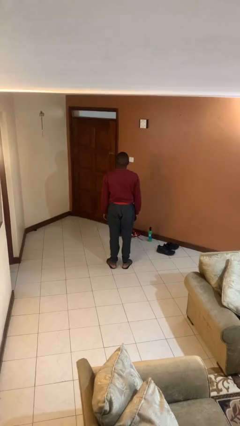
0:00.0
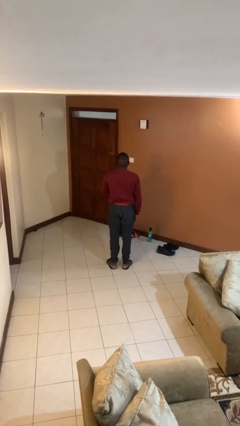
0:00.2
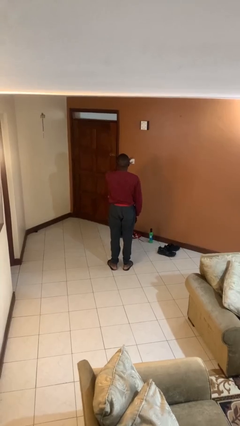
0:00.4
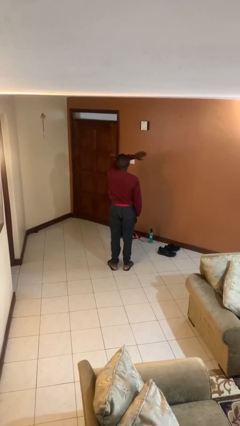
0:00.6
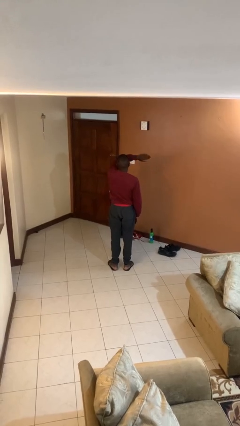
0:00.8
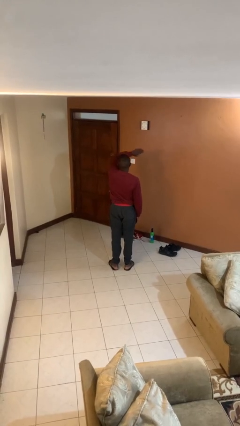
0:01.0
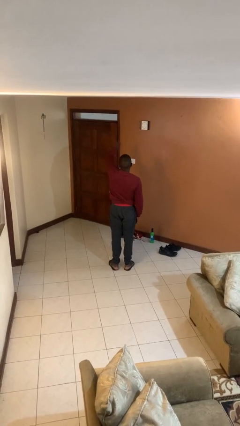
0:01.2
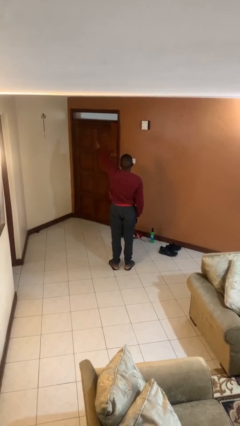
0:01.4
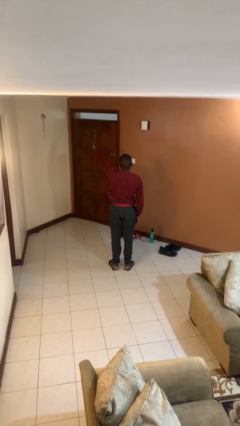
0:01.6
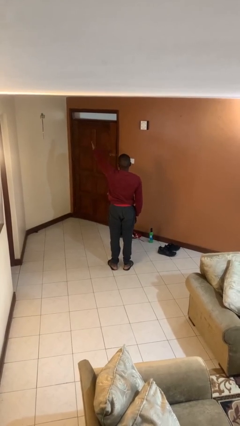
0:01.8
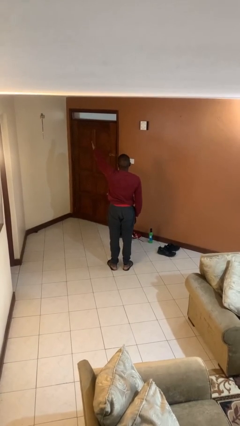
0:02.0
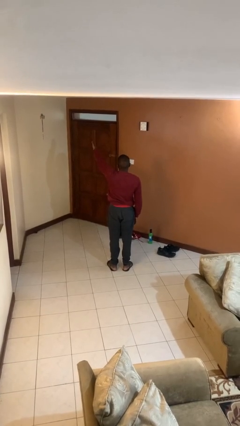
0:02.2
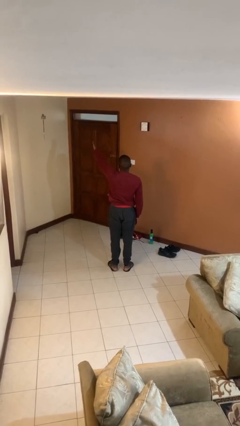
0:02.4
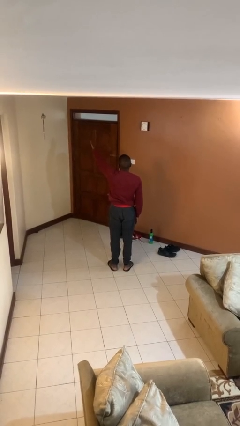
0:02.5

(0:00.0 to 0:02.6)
person gestures swipe left

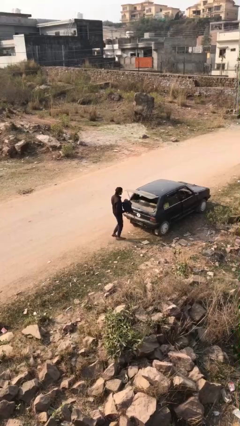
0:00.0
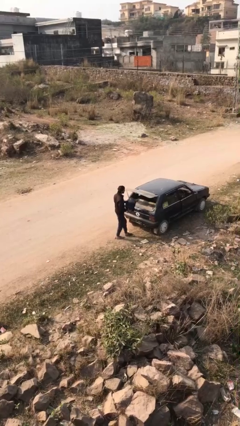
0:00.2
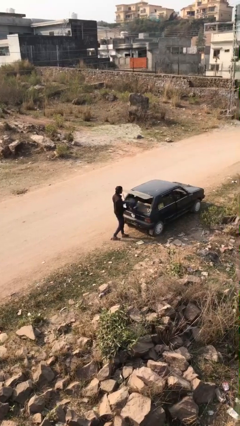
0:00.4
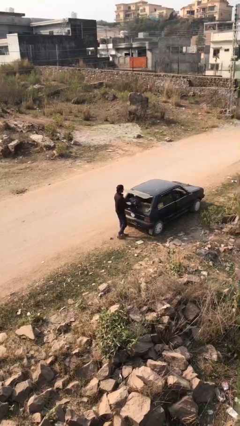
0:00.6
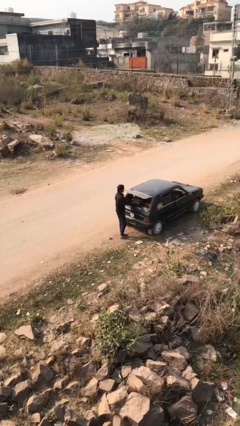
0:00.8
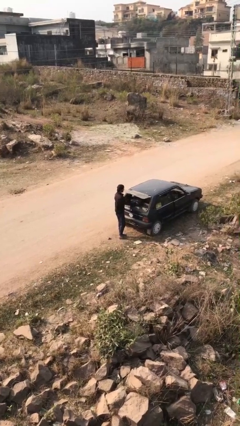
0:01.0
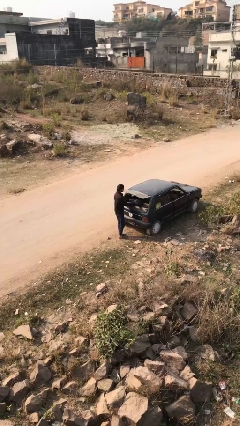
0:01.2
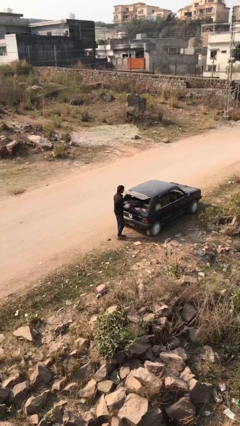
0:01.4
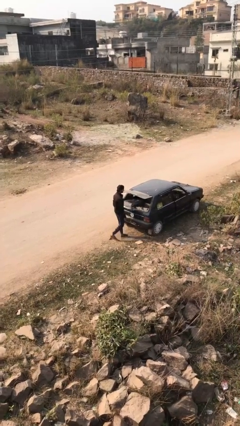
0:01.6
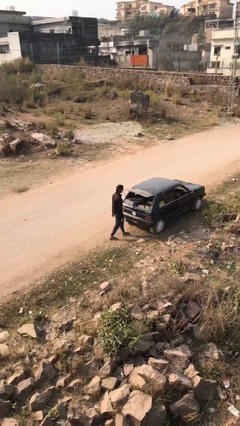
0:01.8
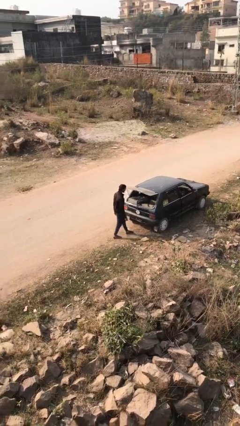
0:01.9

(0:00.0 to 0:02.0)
person loads car

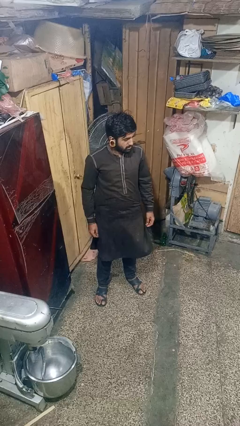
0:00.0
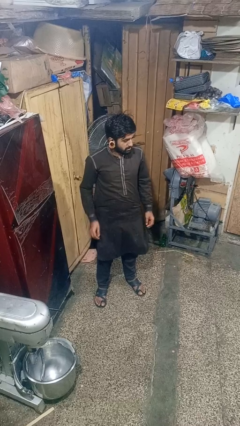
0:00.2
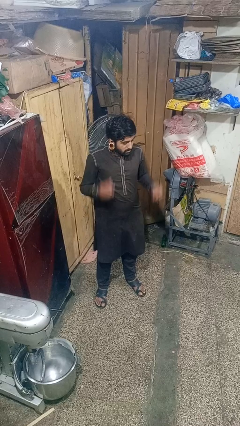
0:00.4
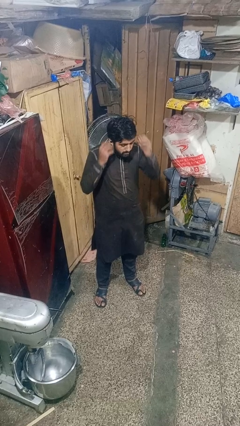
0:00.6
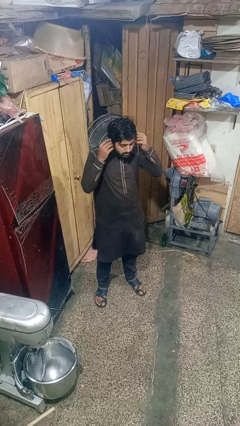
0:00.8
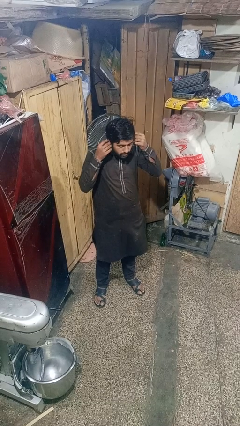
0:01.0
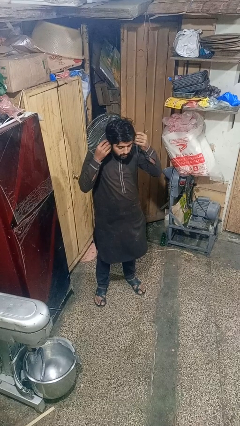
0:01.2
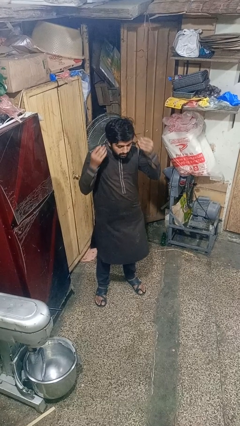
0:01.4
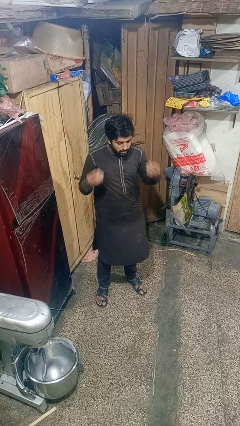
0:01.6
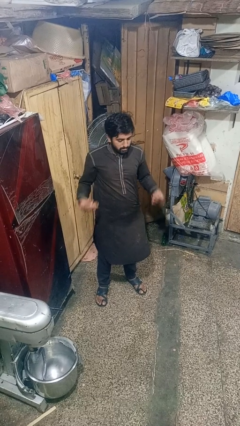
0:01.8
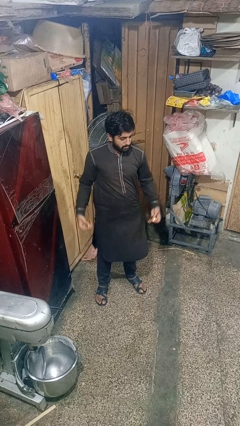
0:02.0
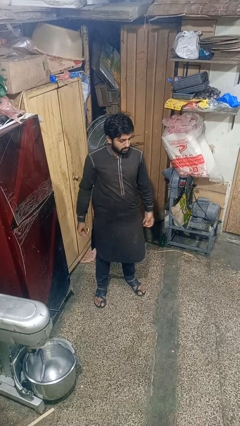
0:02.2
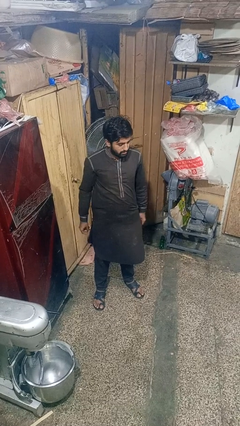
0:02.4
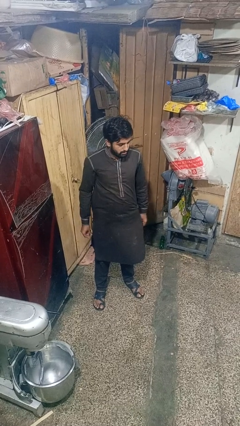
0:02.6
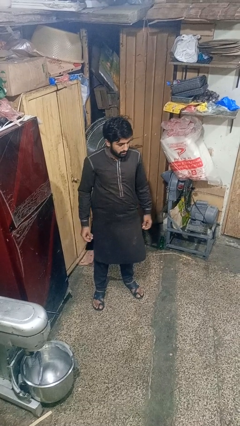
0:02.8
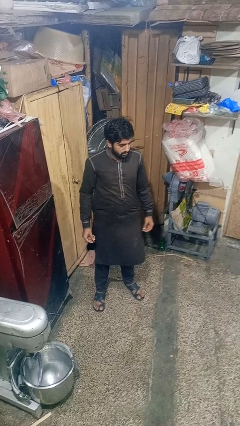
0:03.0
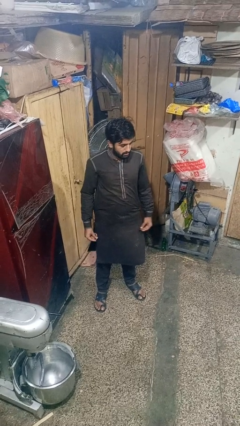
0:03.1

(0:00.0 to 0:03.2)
person takes off earrings

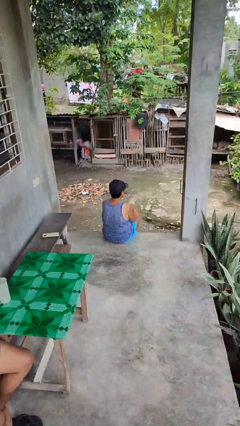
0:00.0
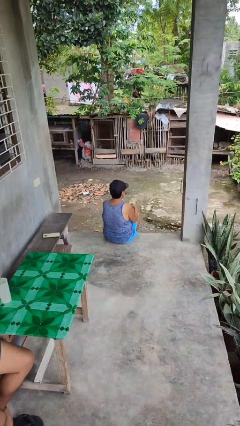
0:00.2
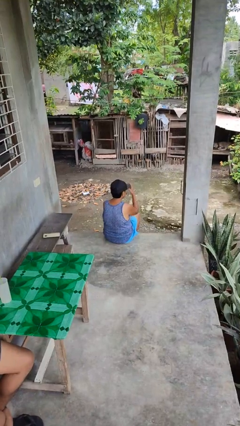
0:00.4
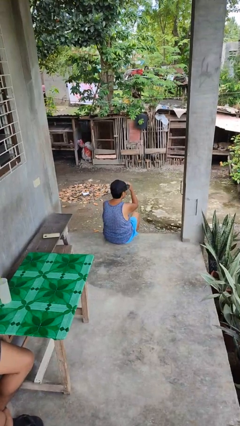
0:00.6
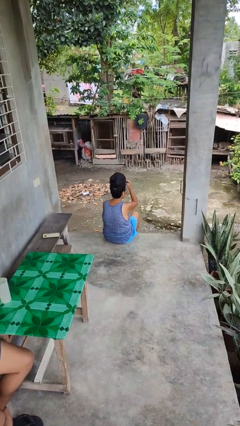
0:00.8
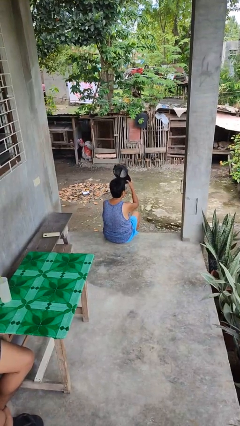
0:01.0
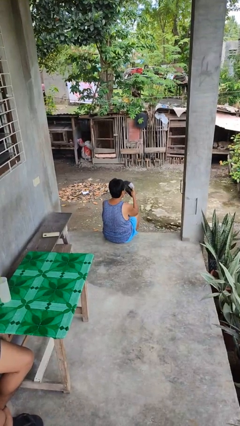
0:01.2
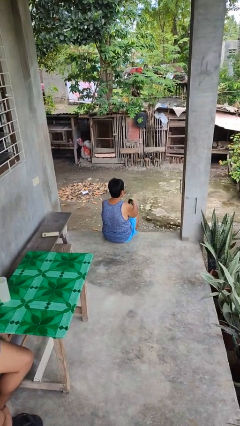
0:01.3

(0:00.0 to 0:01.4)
person takes off hat

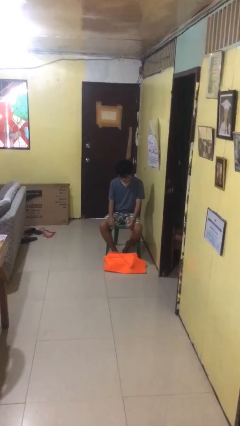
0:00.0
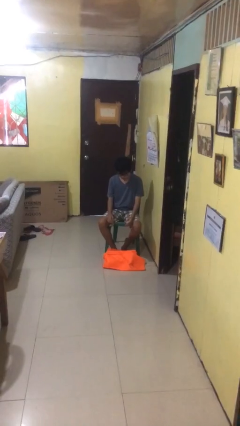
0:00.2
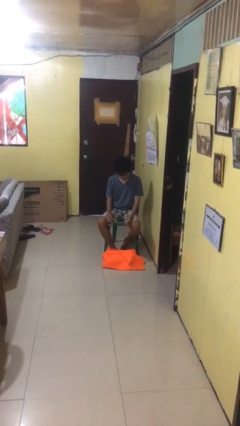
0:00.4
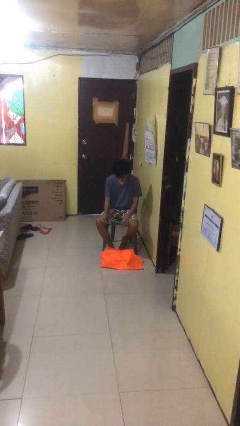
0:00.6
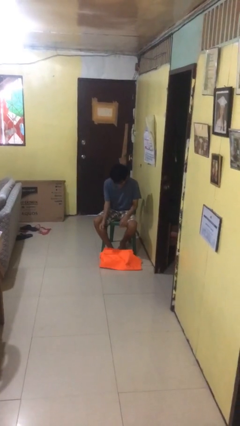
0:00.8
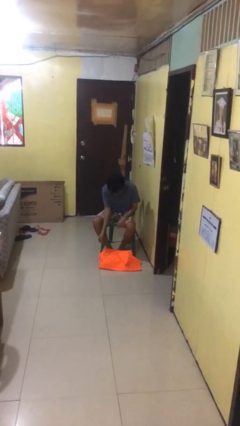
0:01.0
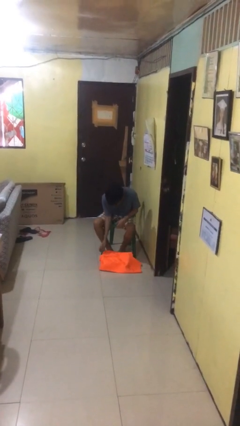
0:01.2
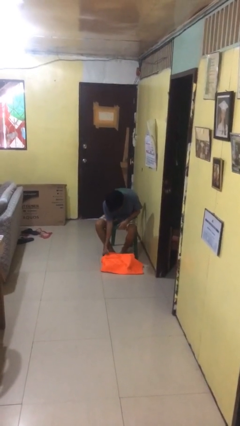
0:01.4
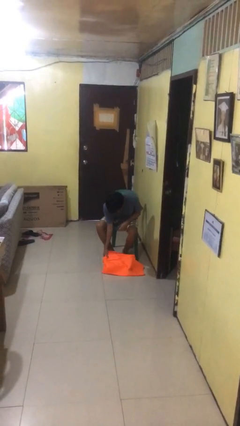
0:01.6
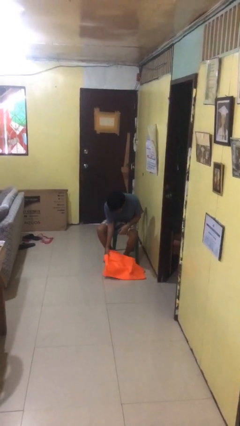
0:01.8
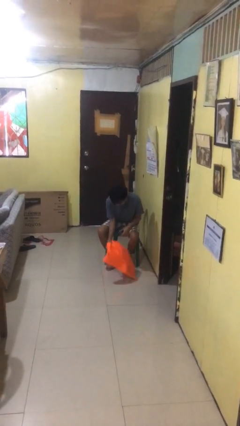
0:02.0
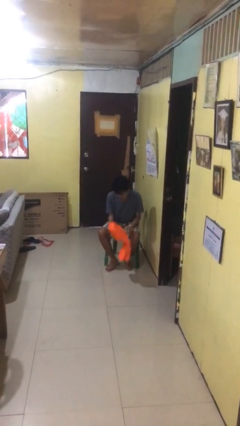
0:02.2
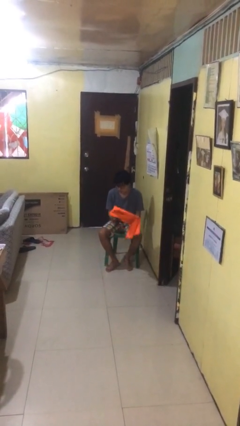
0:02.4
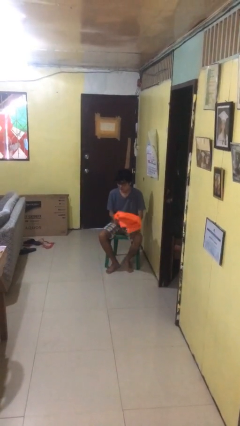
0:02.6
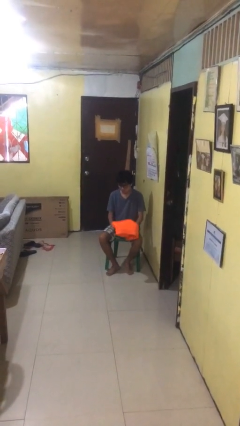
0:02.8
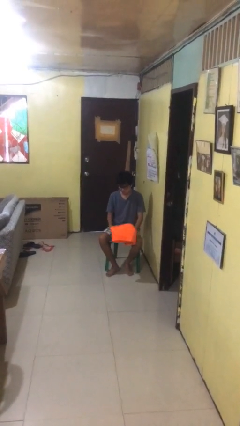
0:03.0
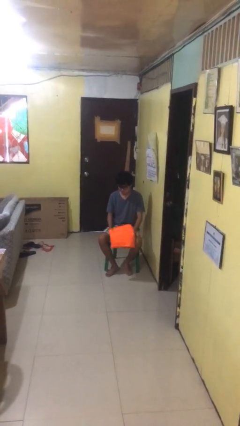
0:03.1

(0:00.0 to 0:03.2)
person picks up object from floor

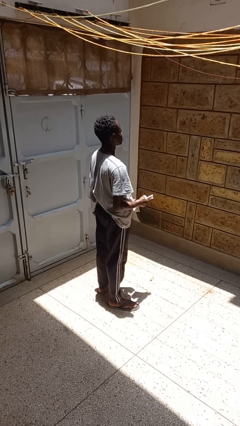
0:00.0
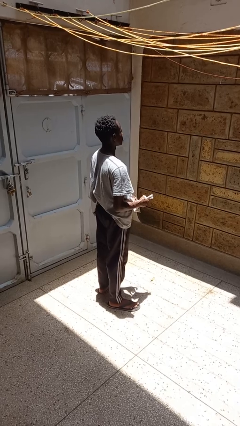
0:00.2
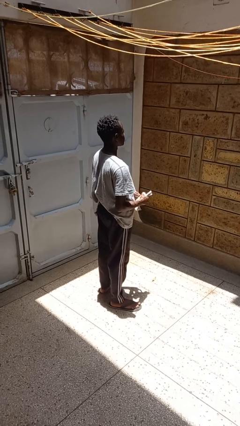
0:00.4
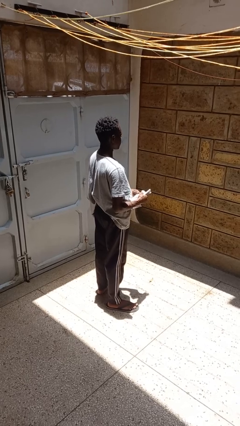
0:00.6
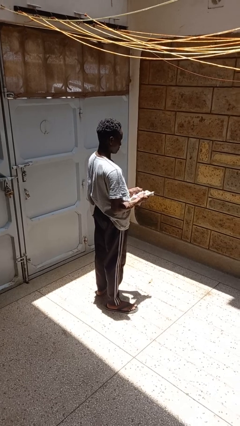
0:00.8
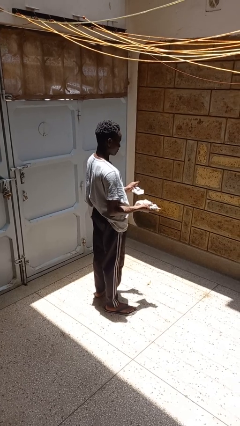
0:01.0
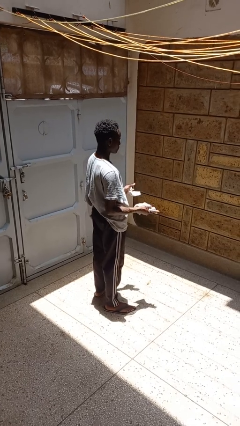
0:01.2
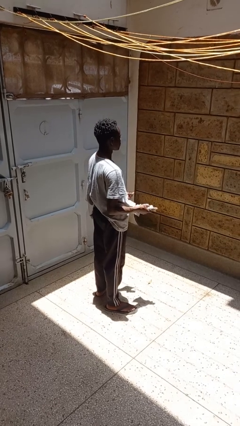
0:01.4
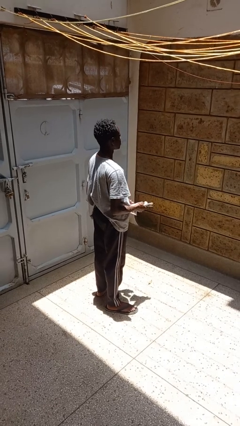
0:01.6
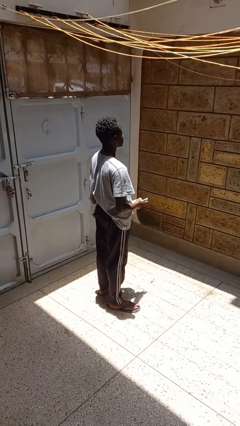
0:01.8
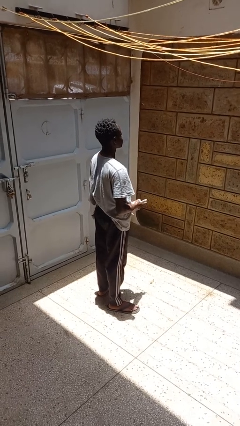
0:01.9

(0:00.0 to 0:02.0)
person tears paper

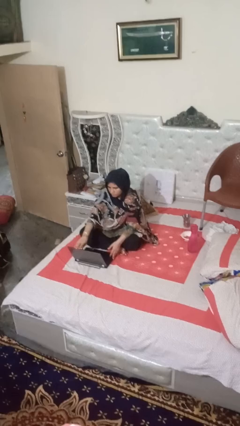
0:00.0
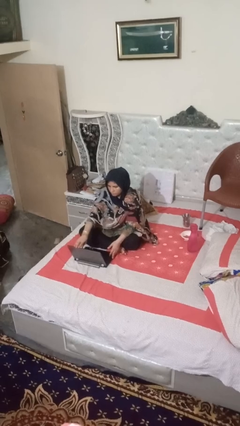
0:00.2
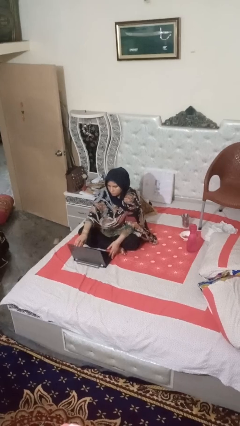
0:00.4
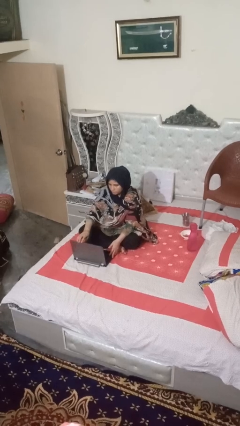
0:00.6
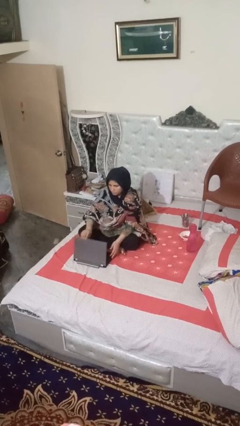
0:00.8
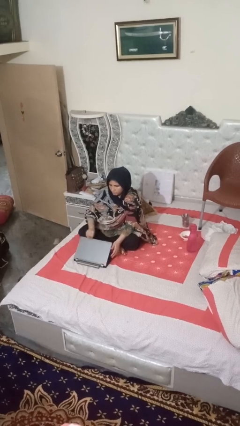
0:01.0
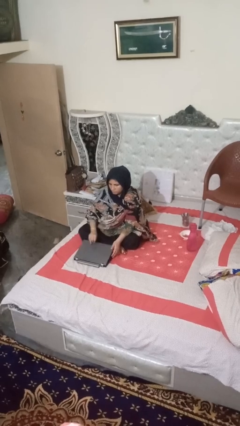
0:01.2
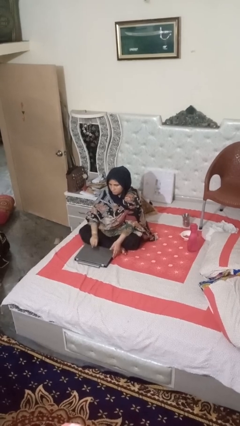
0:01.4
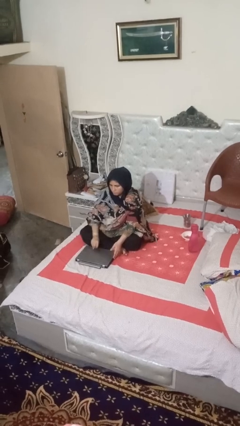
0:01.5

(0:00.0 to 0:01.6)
person closes laptop

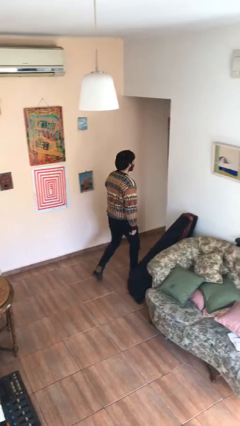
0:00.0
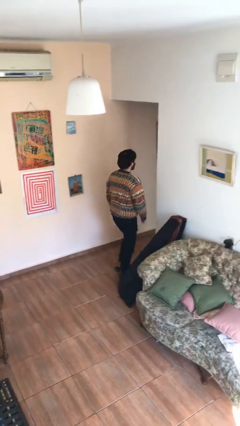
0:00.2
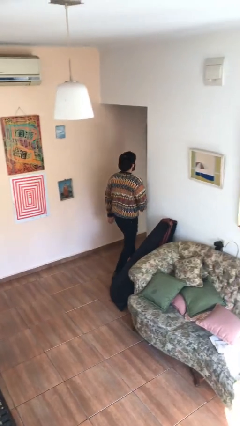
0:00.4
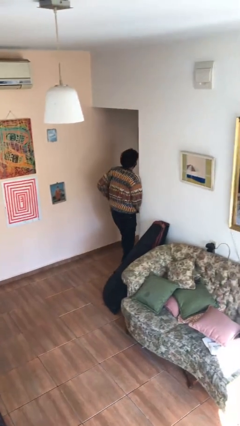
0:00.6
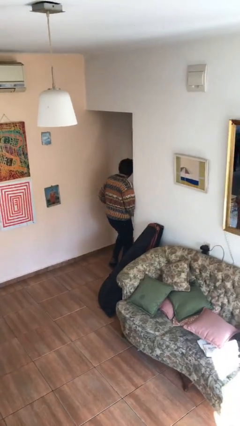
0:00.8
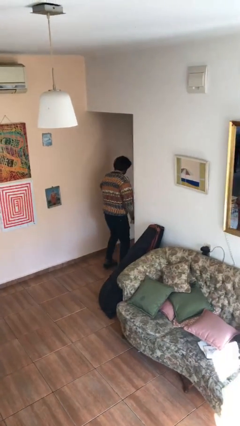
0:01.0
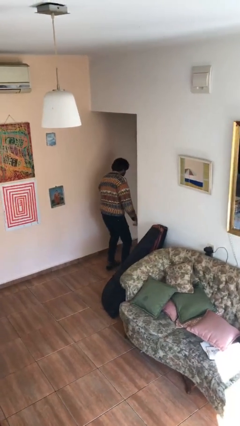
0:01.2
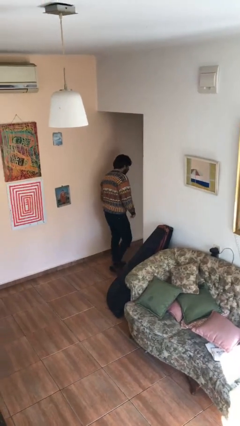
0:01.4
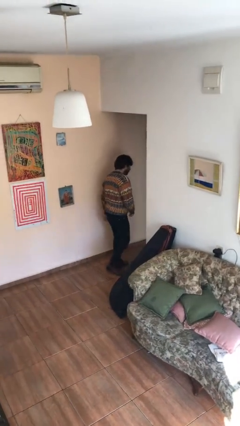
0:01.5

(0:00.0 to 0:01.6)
person bumps into wall
